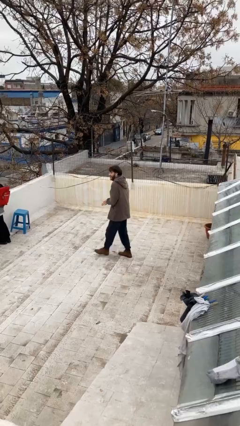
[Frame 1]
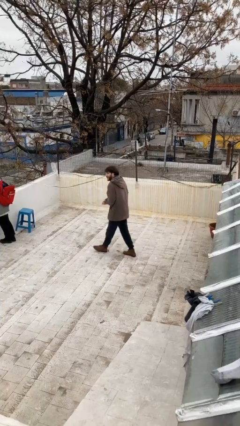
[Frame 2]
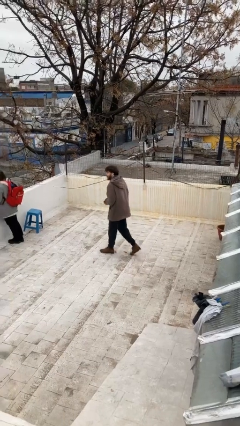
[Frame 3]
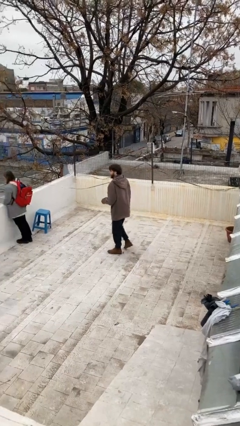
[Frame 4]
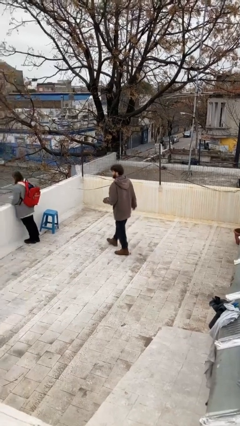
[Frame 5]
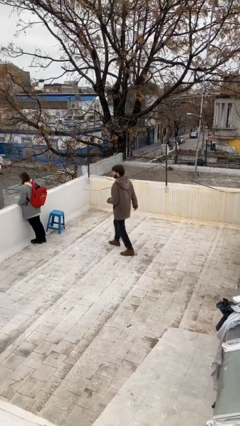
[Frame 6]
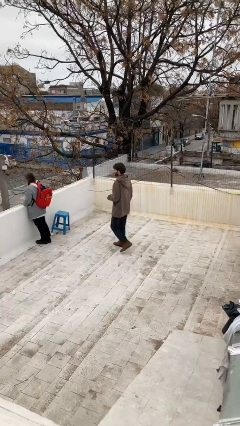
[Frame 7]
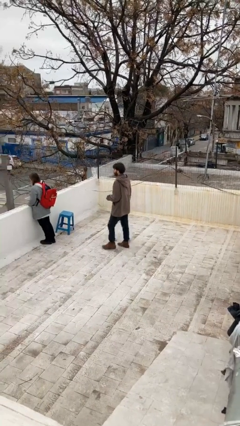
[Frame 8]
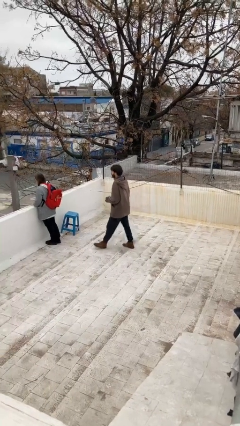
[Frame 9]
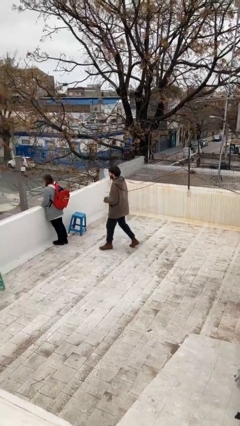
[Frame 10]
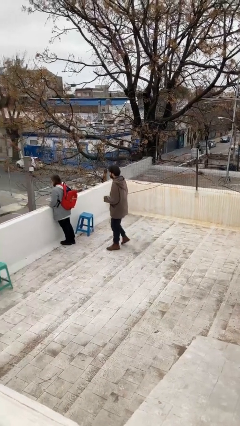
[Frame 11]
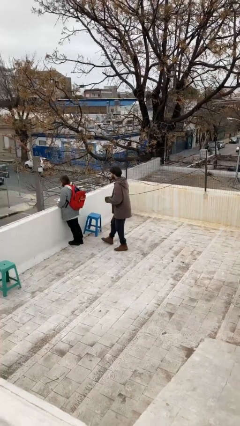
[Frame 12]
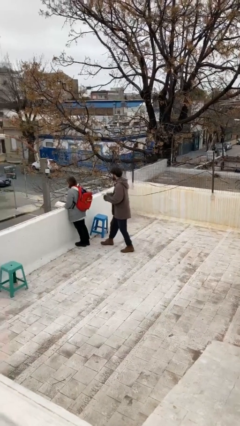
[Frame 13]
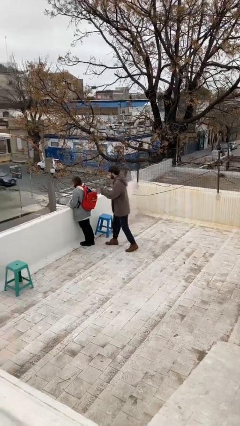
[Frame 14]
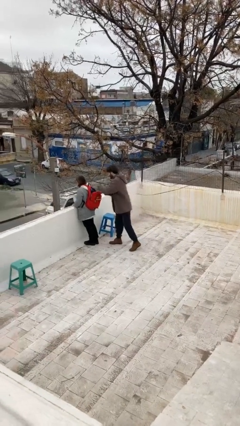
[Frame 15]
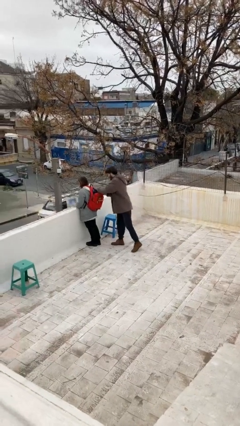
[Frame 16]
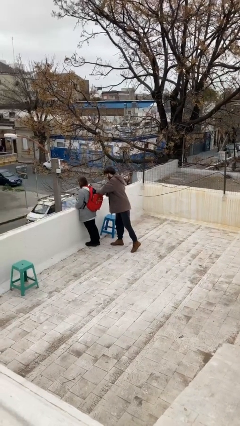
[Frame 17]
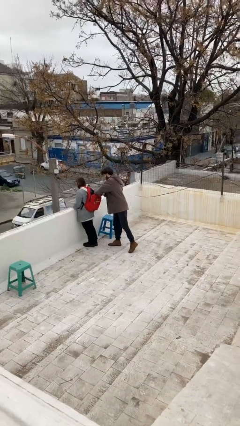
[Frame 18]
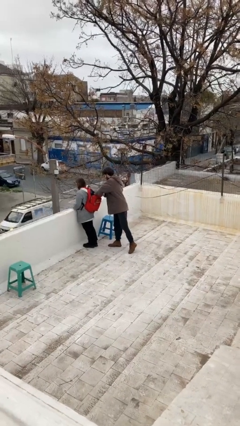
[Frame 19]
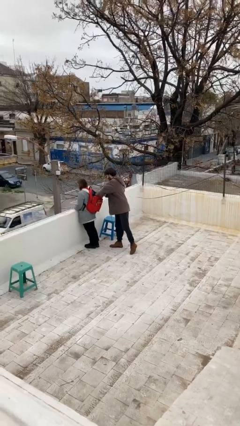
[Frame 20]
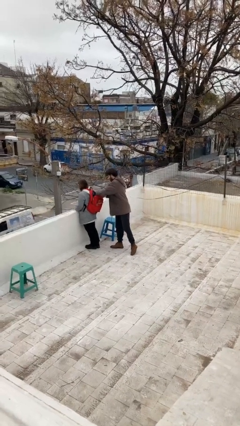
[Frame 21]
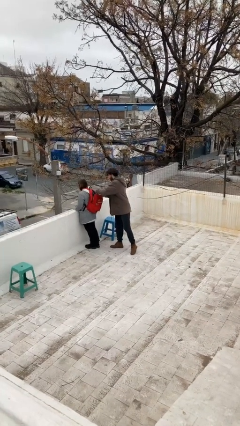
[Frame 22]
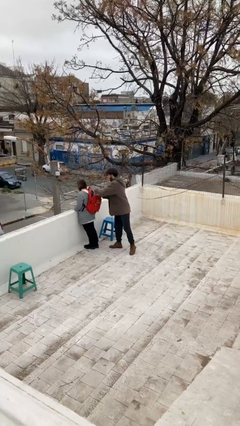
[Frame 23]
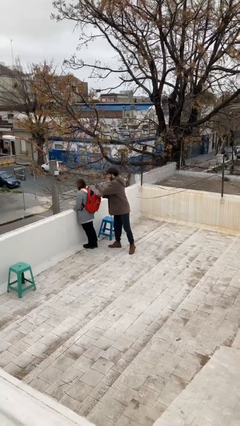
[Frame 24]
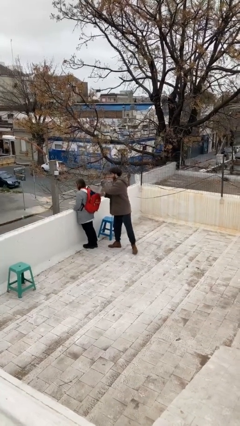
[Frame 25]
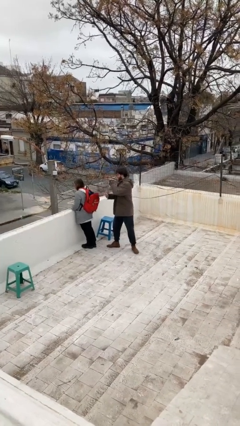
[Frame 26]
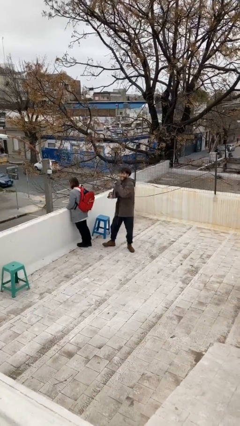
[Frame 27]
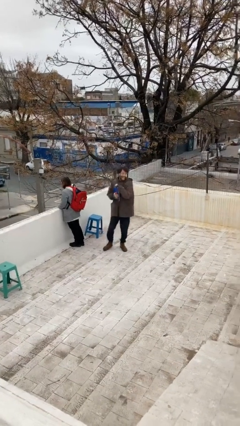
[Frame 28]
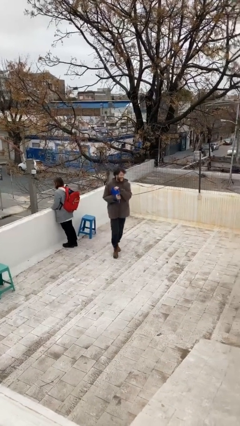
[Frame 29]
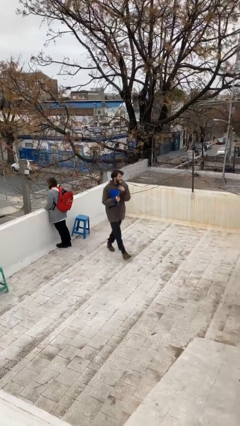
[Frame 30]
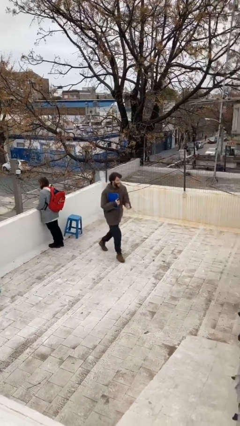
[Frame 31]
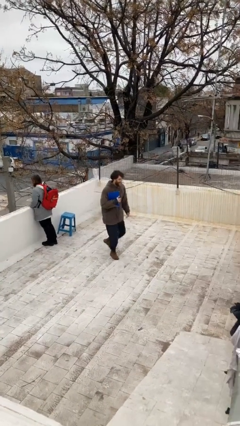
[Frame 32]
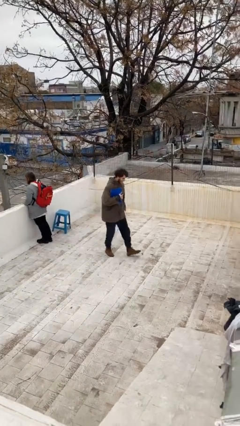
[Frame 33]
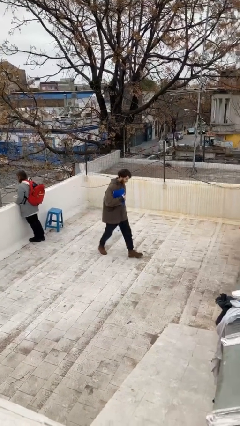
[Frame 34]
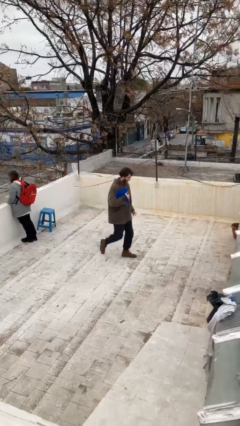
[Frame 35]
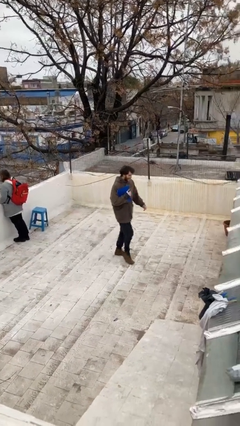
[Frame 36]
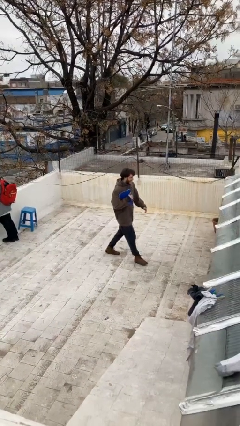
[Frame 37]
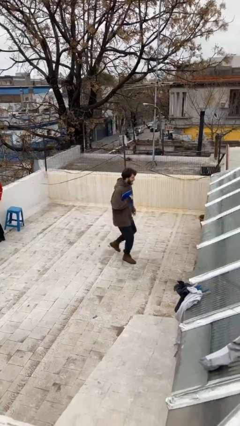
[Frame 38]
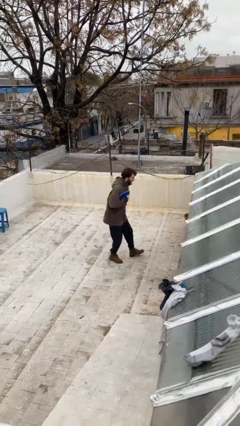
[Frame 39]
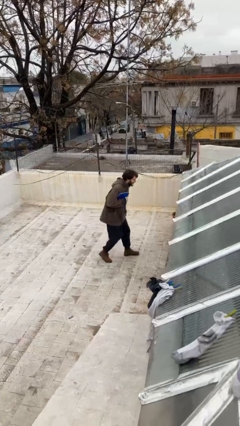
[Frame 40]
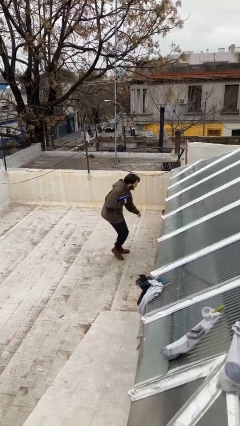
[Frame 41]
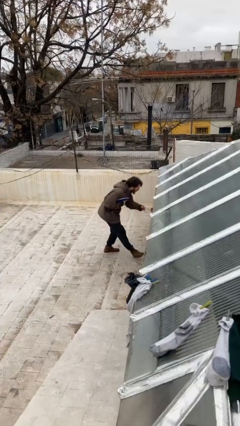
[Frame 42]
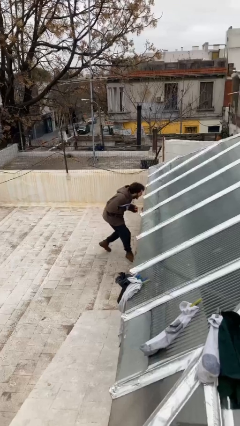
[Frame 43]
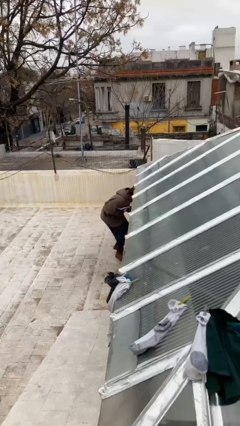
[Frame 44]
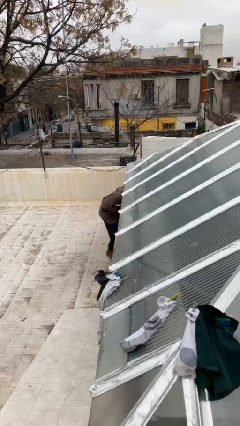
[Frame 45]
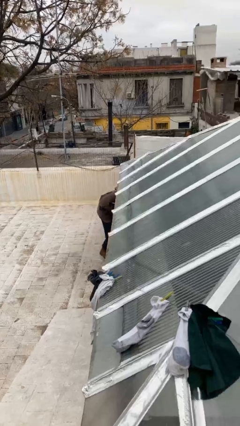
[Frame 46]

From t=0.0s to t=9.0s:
person steals object from person

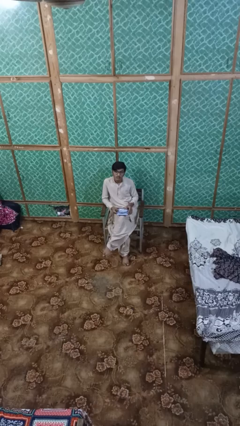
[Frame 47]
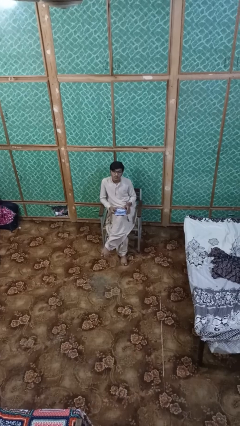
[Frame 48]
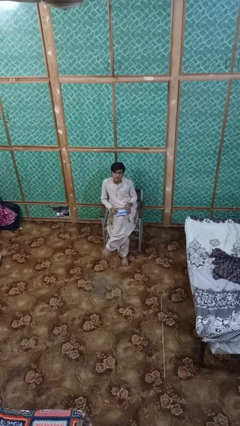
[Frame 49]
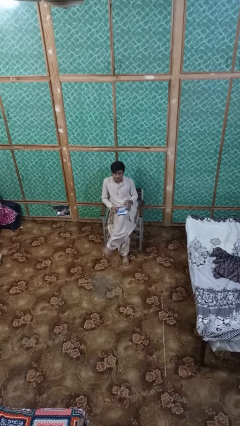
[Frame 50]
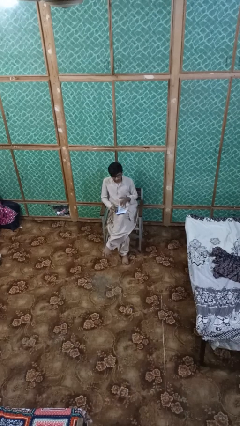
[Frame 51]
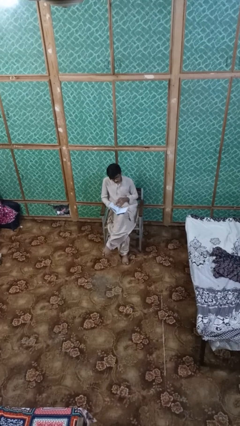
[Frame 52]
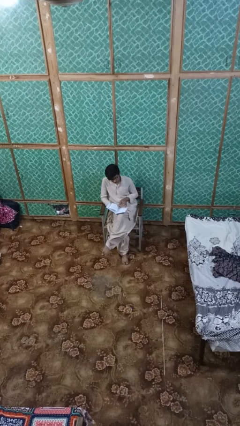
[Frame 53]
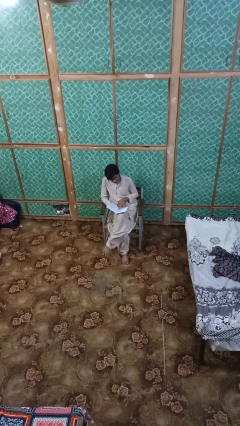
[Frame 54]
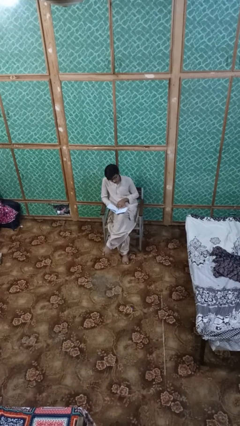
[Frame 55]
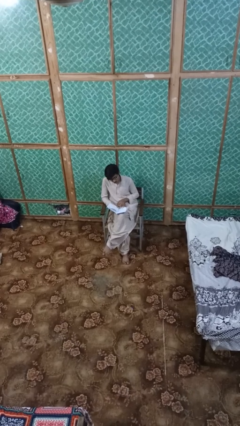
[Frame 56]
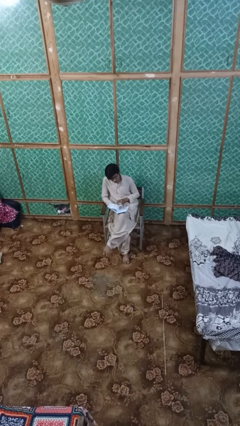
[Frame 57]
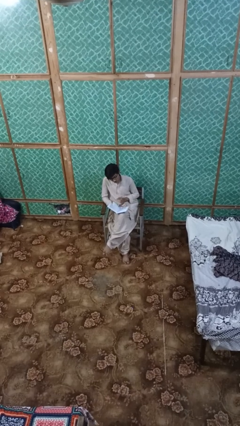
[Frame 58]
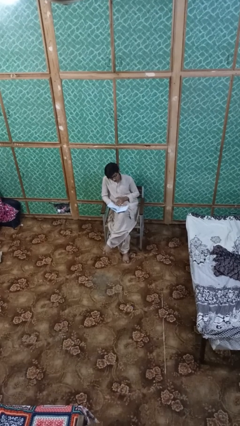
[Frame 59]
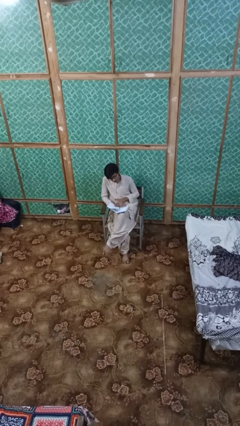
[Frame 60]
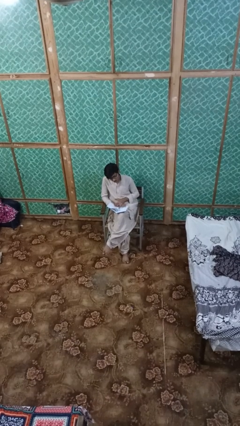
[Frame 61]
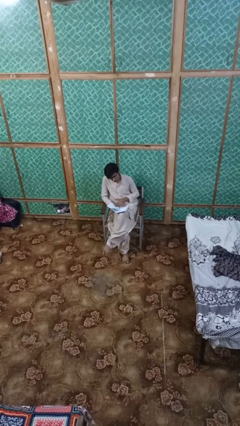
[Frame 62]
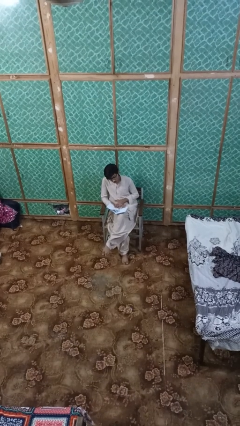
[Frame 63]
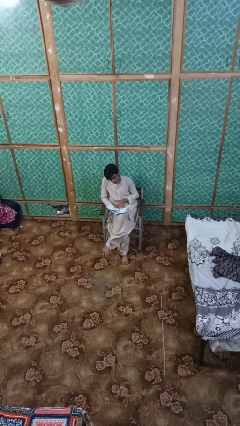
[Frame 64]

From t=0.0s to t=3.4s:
person reads magazine

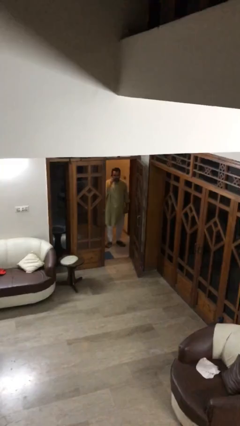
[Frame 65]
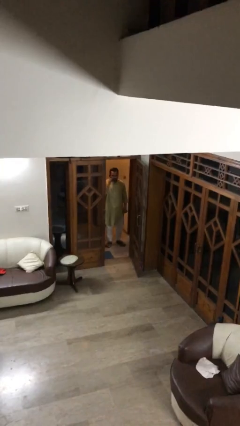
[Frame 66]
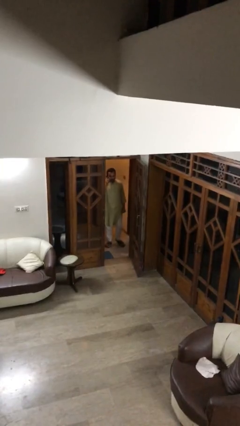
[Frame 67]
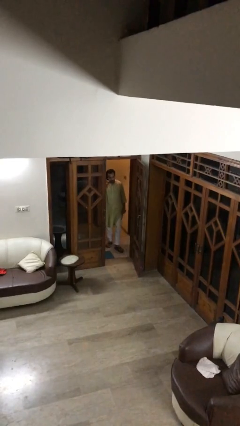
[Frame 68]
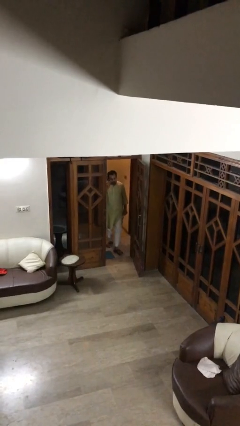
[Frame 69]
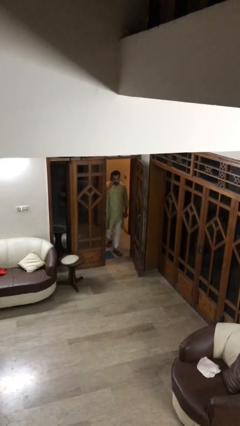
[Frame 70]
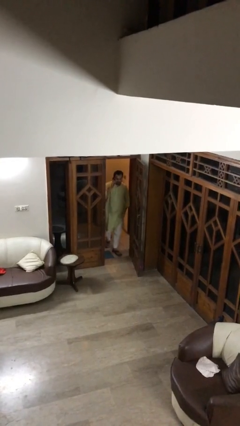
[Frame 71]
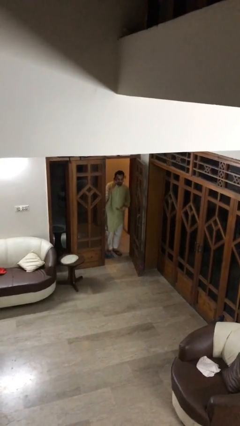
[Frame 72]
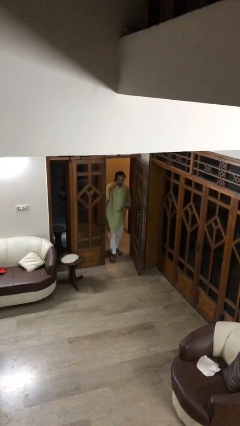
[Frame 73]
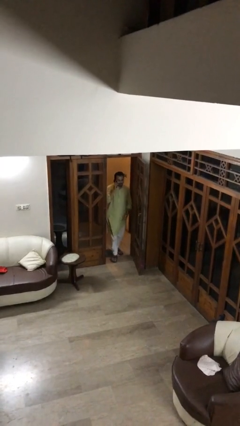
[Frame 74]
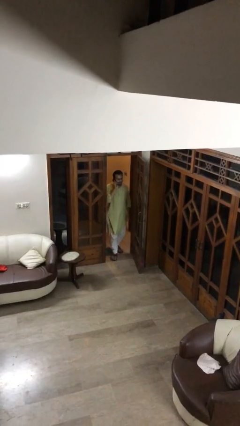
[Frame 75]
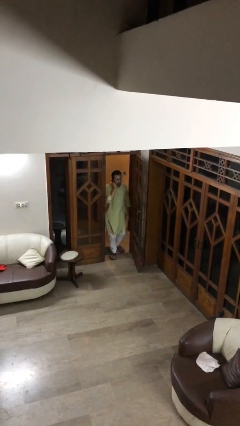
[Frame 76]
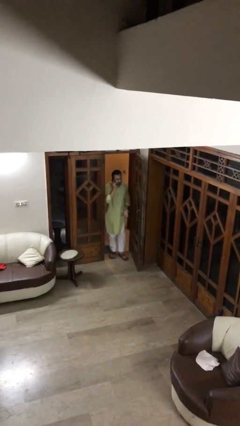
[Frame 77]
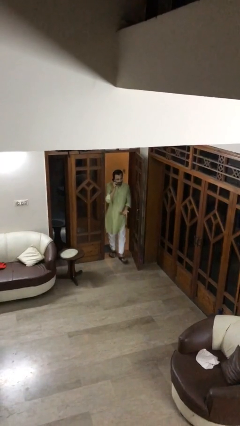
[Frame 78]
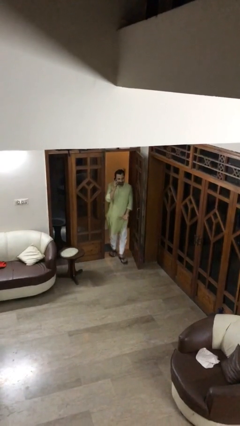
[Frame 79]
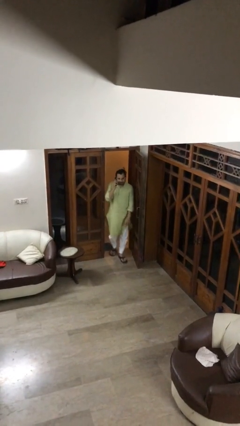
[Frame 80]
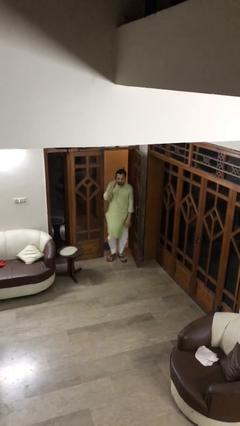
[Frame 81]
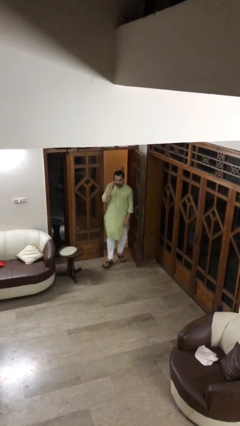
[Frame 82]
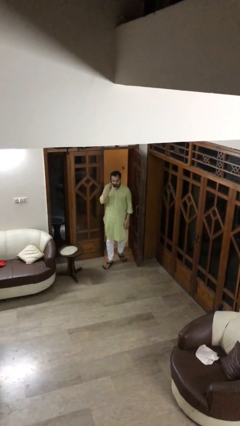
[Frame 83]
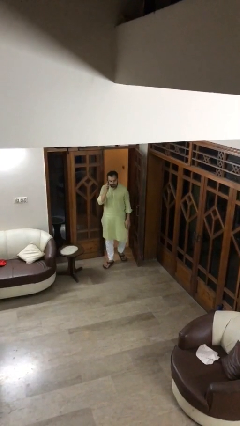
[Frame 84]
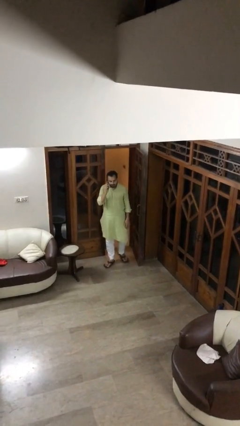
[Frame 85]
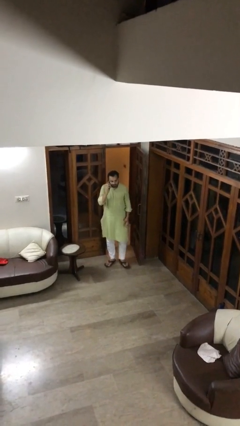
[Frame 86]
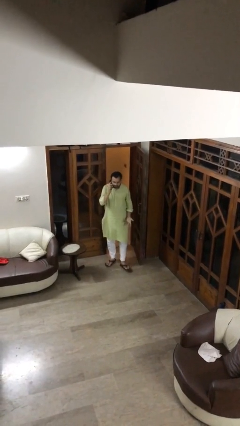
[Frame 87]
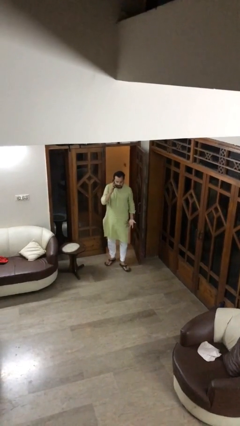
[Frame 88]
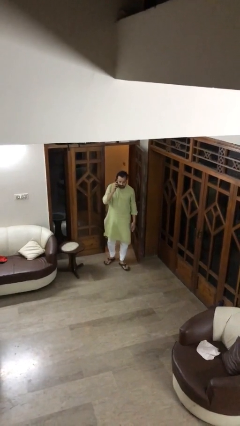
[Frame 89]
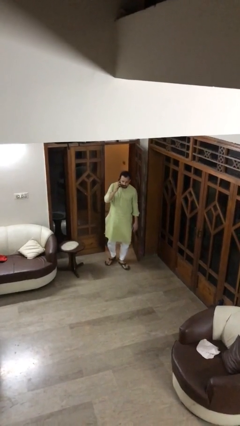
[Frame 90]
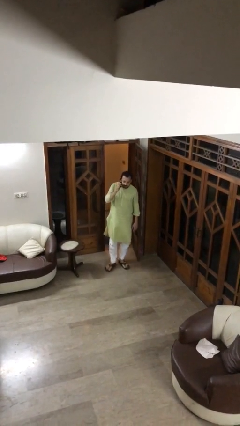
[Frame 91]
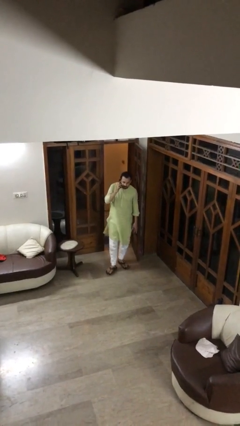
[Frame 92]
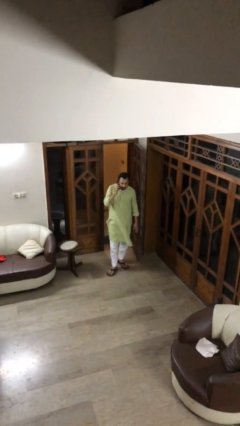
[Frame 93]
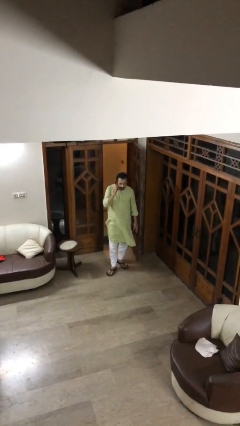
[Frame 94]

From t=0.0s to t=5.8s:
person enters scene through structure
